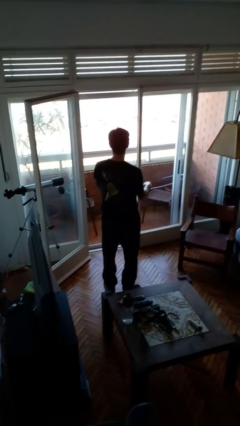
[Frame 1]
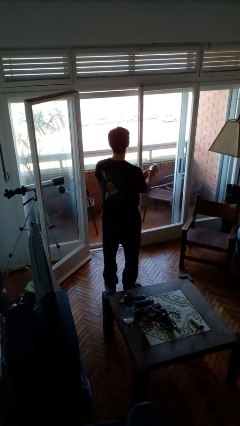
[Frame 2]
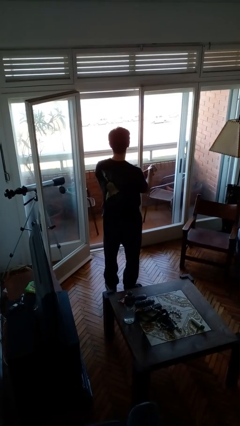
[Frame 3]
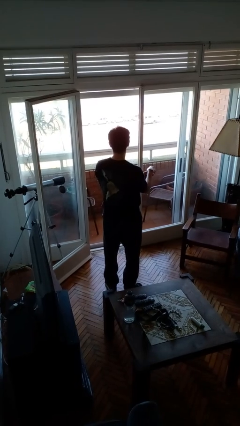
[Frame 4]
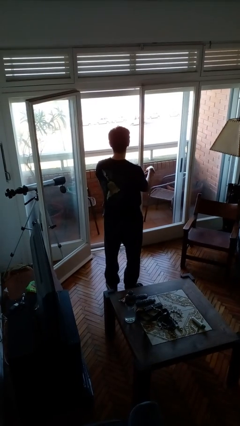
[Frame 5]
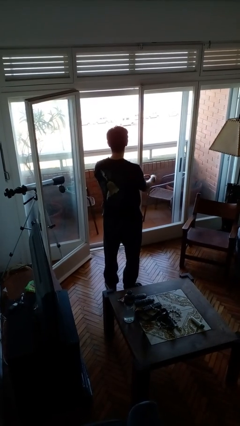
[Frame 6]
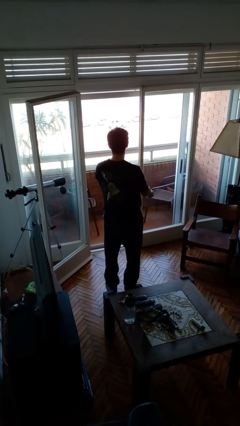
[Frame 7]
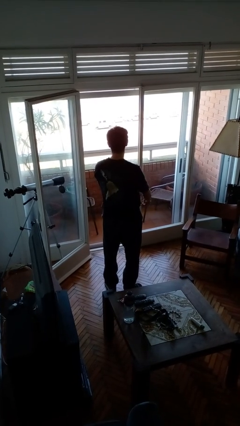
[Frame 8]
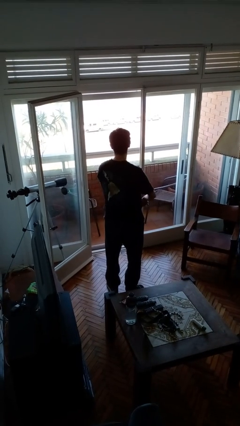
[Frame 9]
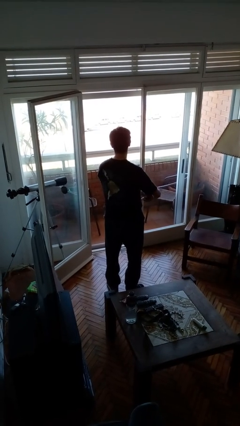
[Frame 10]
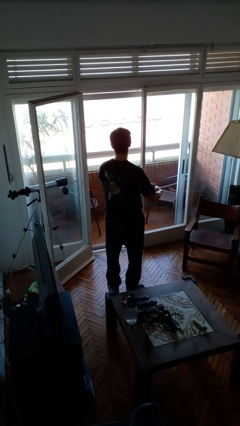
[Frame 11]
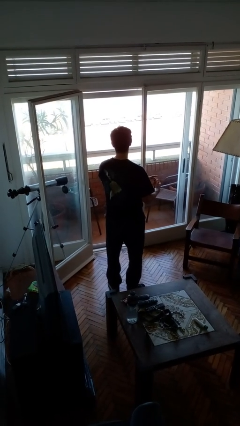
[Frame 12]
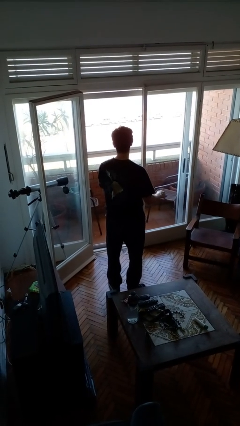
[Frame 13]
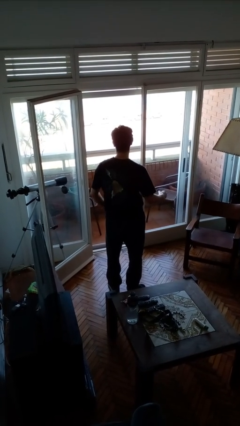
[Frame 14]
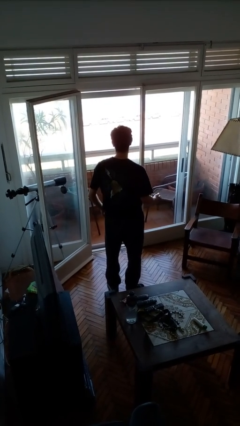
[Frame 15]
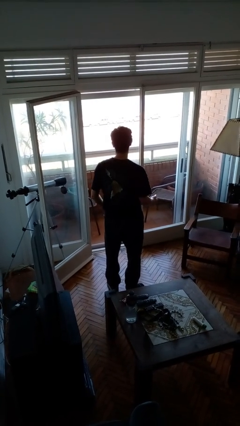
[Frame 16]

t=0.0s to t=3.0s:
person takes off wristwatch

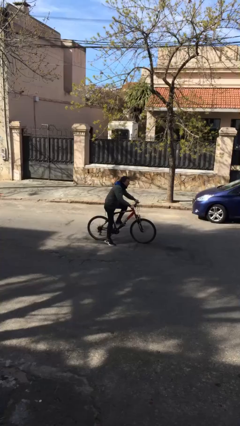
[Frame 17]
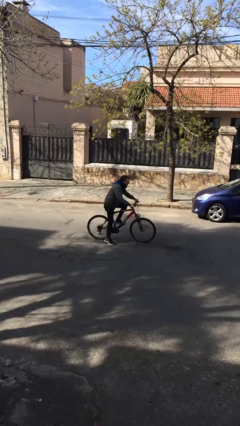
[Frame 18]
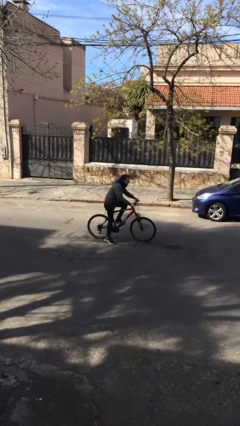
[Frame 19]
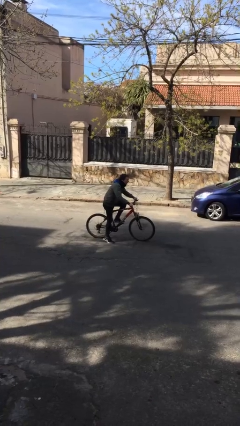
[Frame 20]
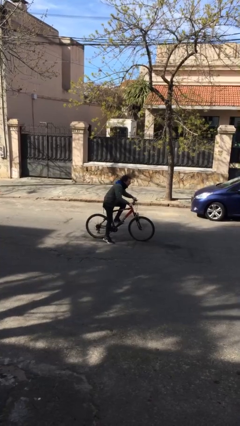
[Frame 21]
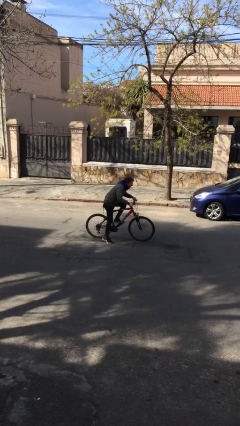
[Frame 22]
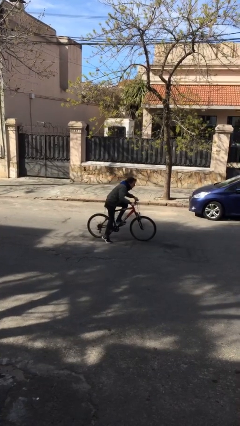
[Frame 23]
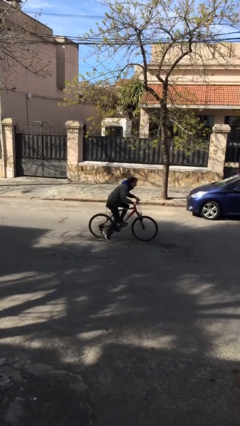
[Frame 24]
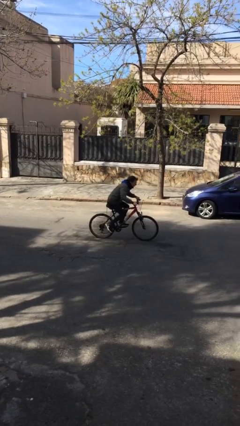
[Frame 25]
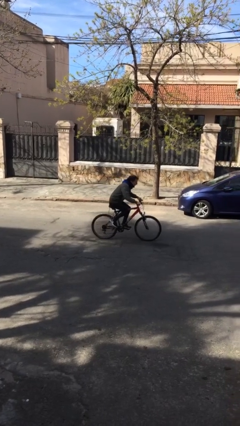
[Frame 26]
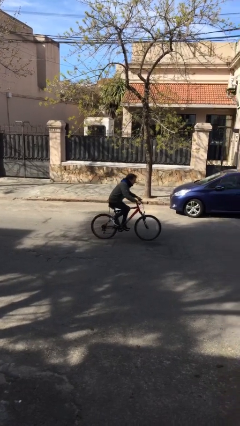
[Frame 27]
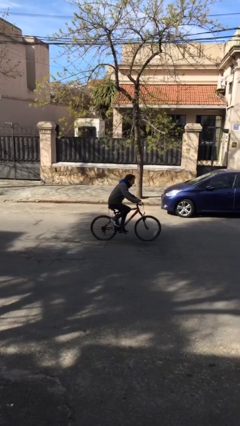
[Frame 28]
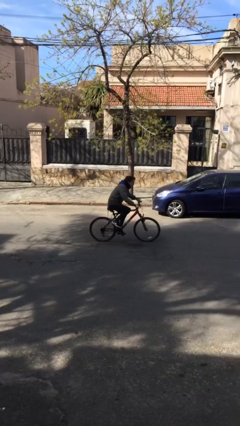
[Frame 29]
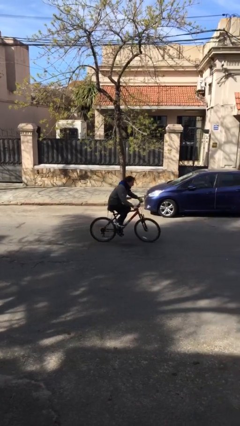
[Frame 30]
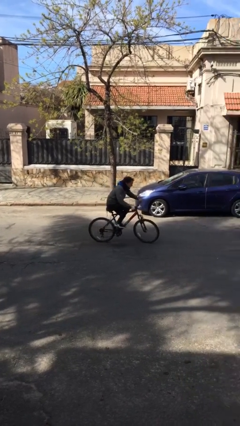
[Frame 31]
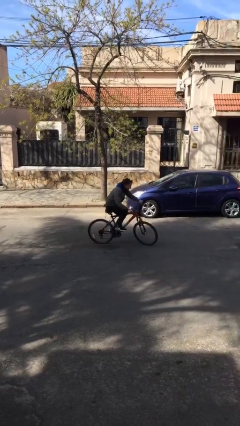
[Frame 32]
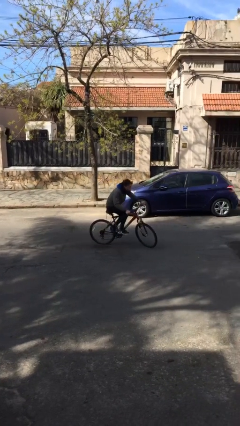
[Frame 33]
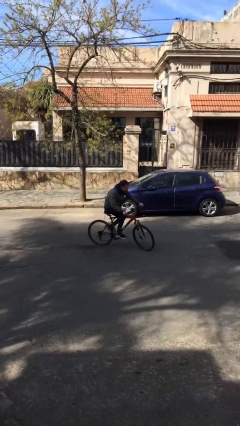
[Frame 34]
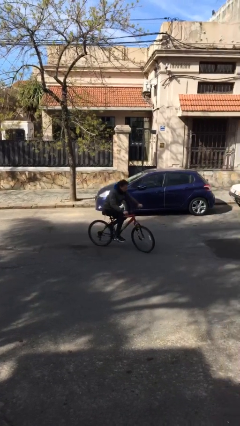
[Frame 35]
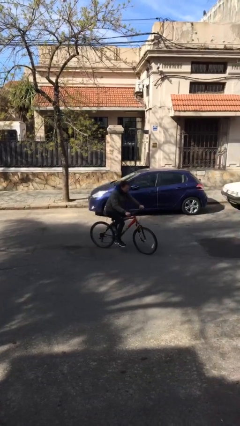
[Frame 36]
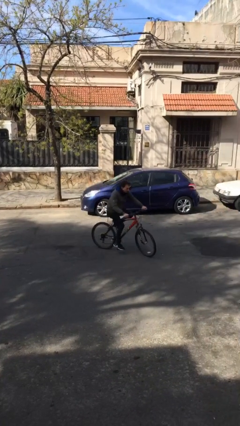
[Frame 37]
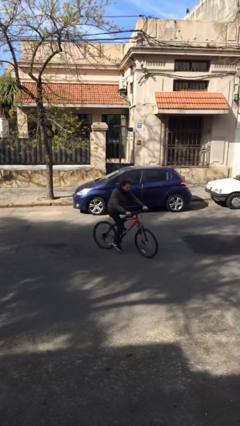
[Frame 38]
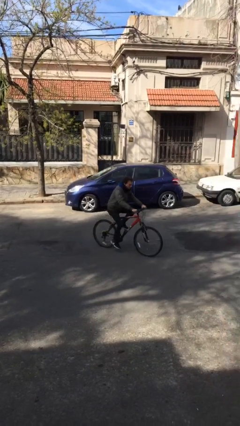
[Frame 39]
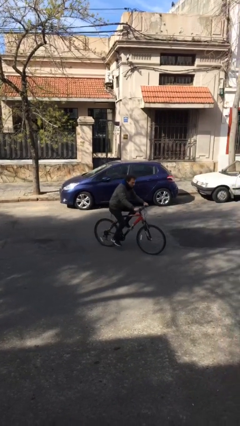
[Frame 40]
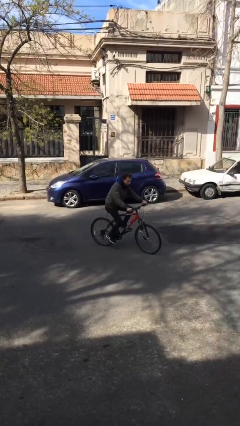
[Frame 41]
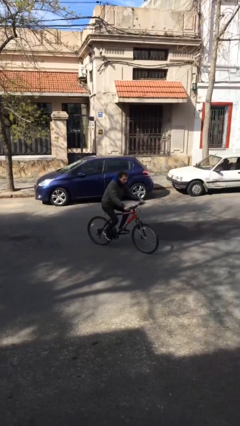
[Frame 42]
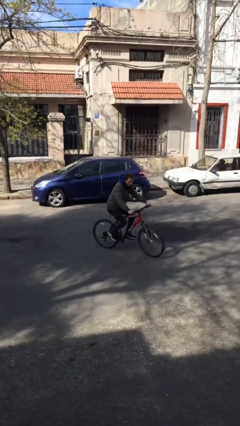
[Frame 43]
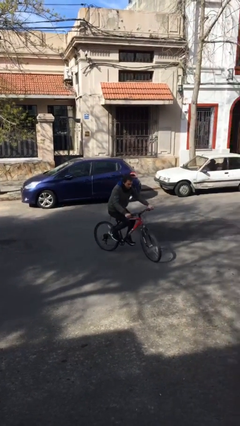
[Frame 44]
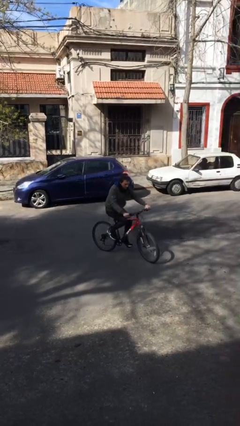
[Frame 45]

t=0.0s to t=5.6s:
person rides bicycle

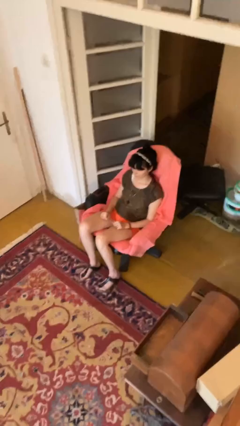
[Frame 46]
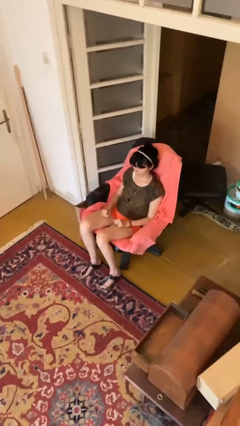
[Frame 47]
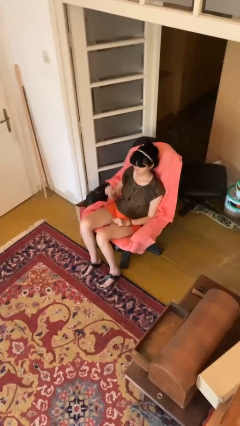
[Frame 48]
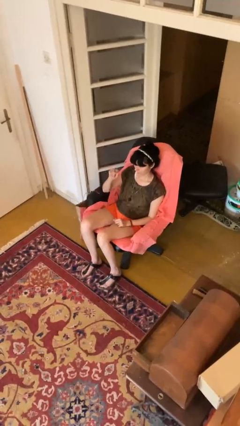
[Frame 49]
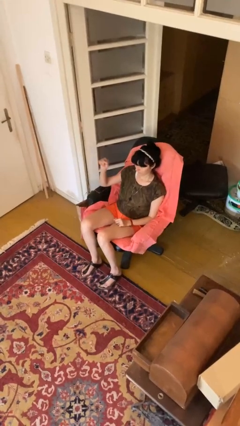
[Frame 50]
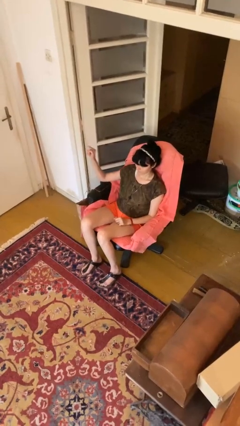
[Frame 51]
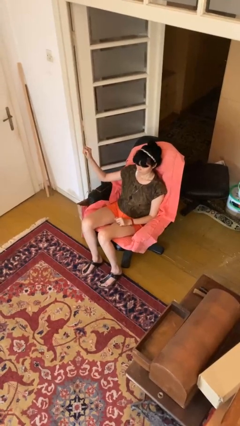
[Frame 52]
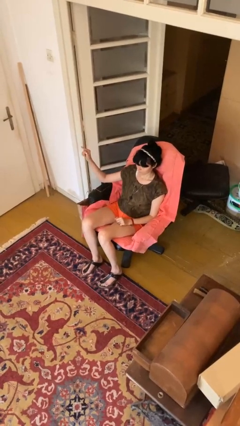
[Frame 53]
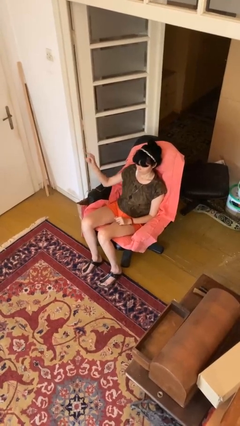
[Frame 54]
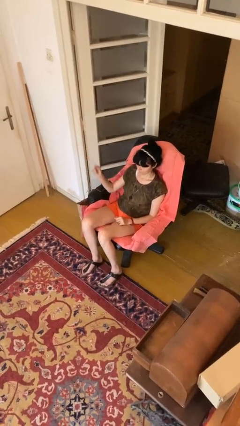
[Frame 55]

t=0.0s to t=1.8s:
person gestures swipe right

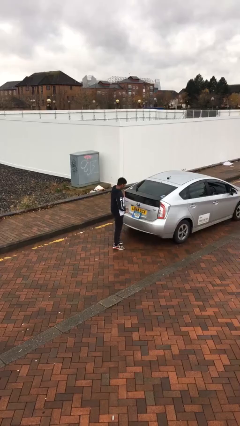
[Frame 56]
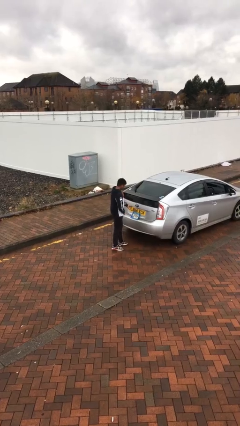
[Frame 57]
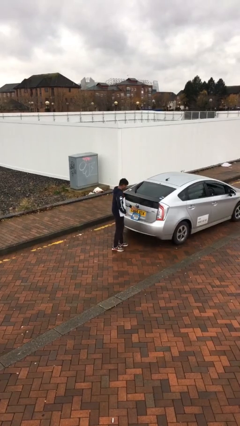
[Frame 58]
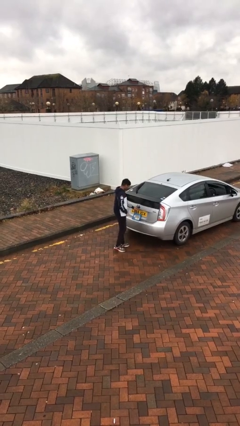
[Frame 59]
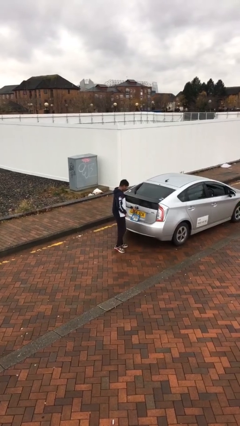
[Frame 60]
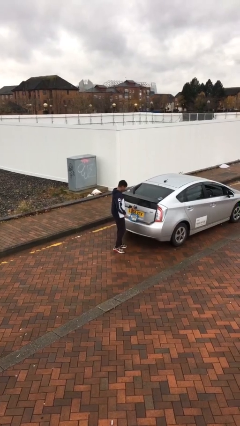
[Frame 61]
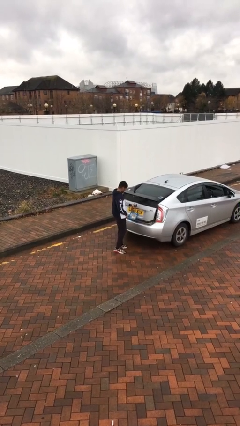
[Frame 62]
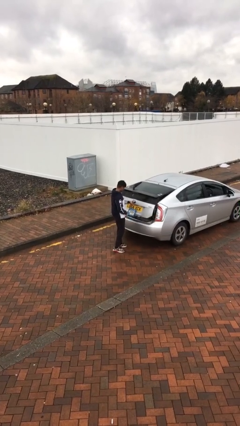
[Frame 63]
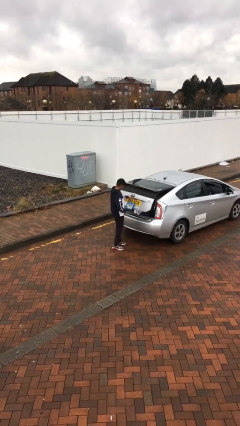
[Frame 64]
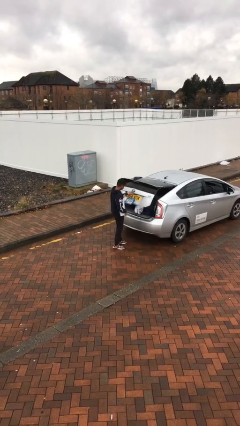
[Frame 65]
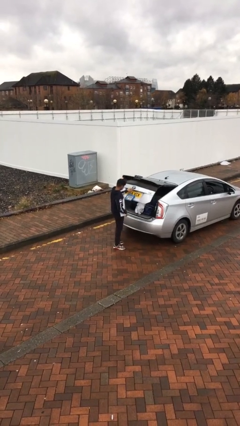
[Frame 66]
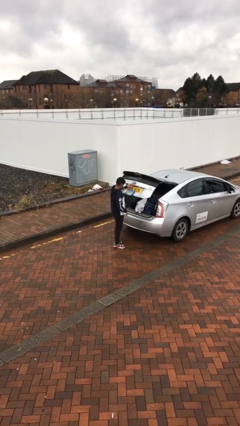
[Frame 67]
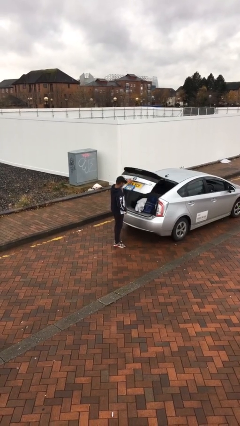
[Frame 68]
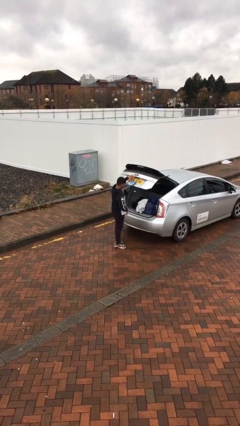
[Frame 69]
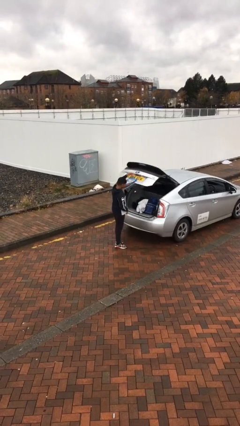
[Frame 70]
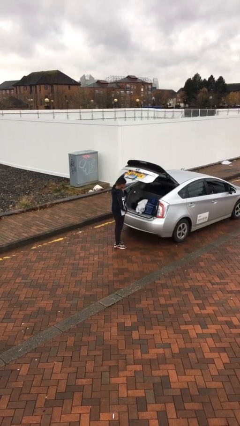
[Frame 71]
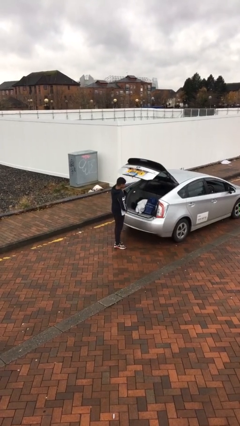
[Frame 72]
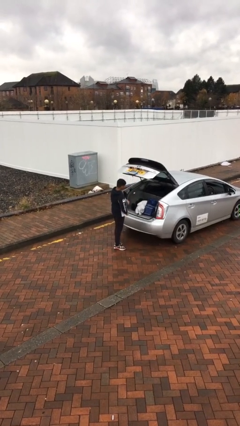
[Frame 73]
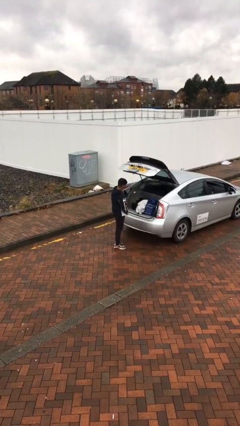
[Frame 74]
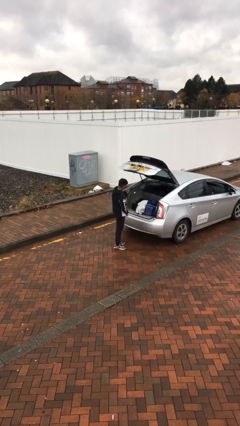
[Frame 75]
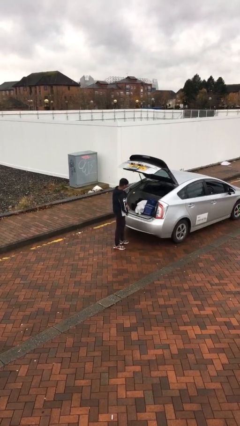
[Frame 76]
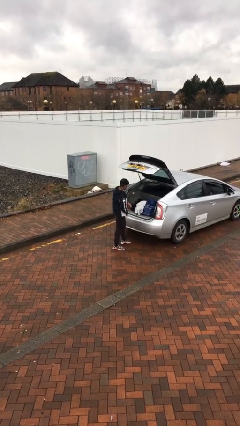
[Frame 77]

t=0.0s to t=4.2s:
person opens car trunk

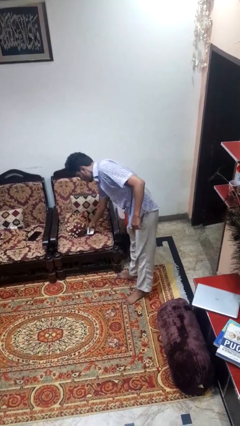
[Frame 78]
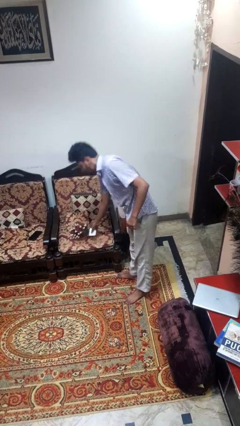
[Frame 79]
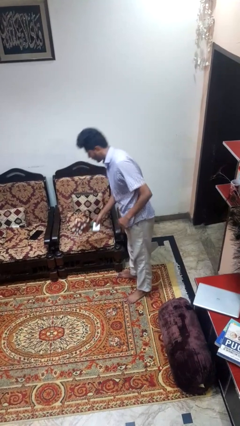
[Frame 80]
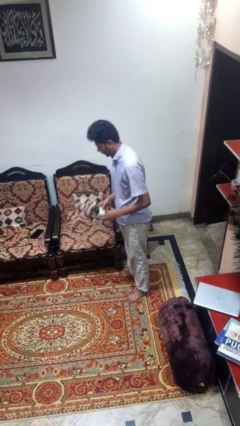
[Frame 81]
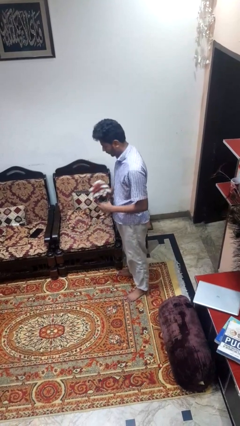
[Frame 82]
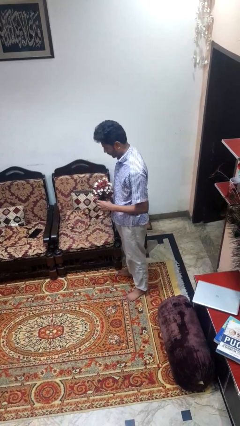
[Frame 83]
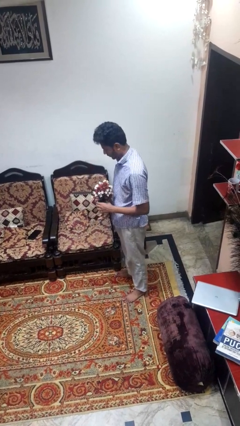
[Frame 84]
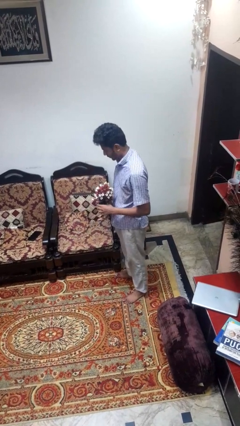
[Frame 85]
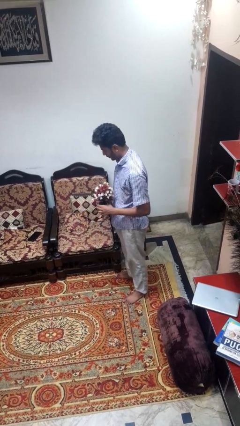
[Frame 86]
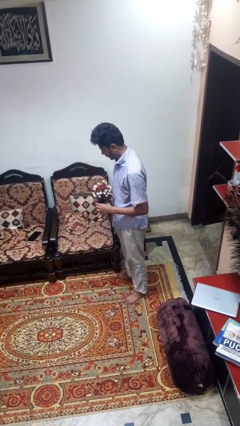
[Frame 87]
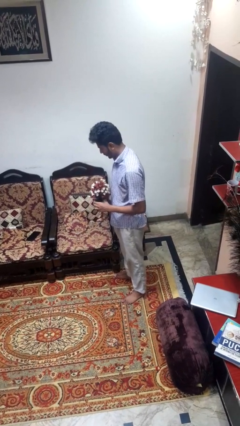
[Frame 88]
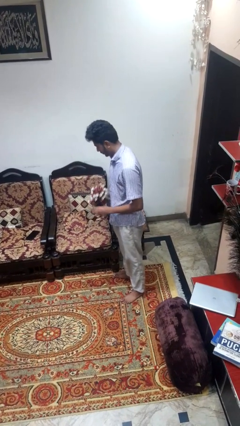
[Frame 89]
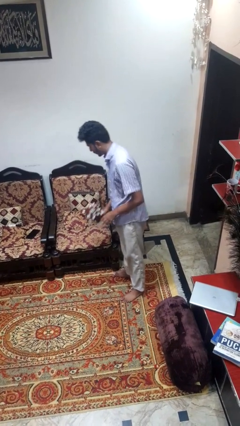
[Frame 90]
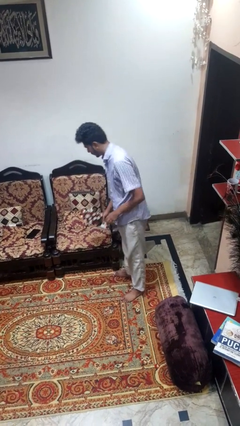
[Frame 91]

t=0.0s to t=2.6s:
person picks up object from couch
